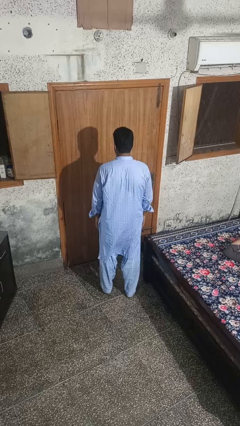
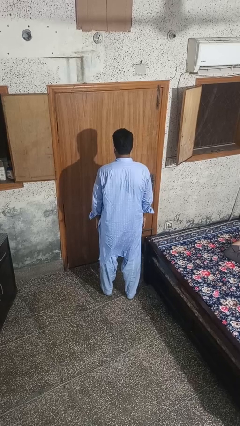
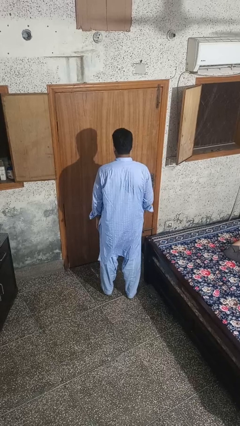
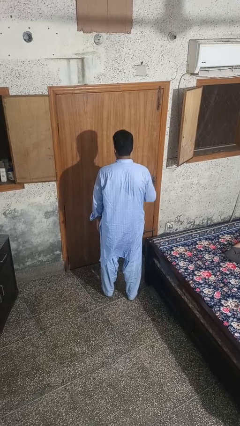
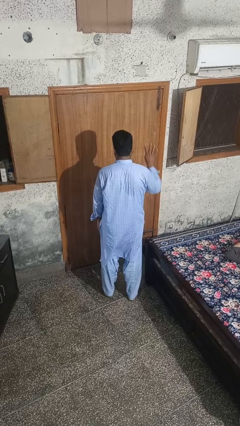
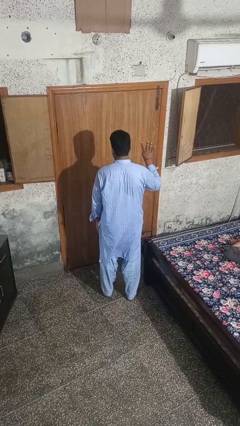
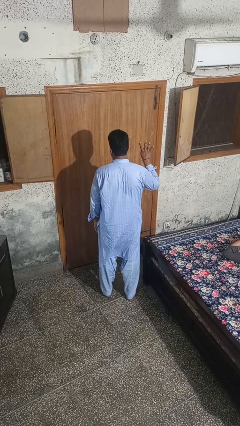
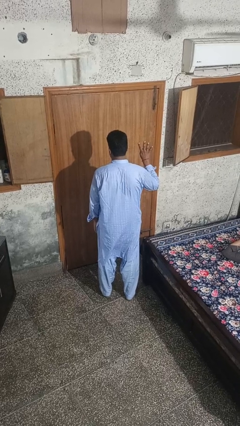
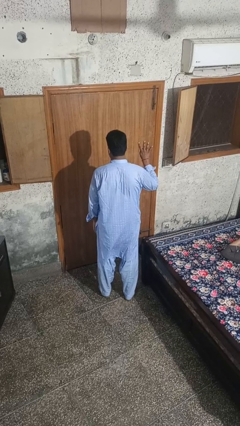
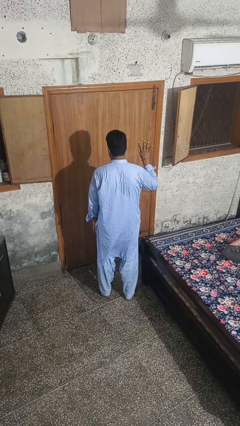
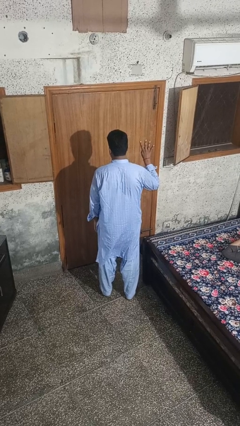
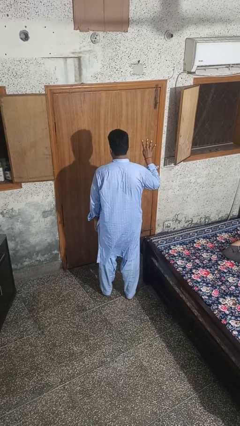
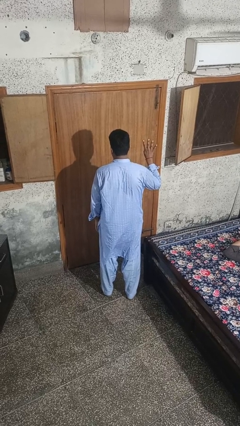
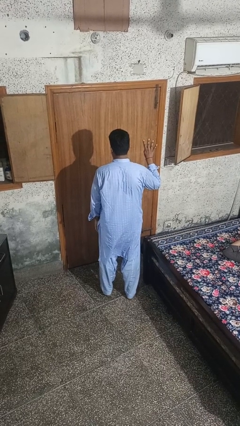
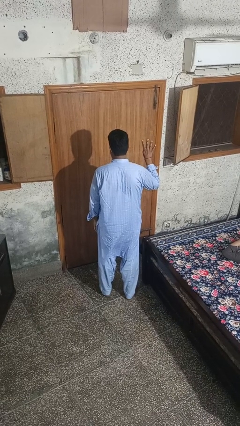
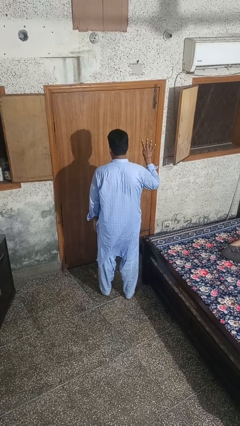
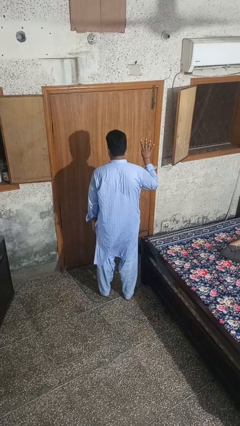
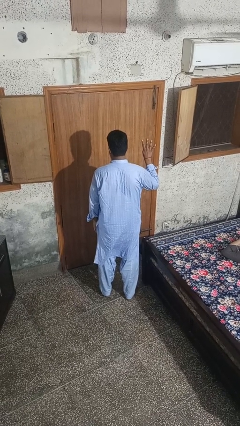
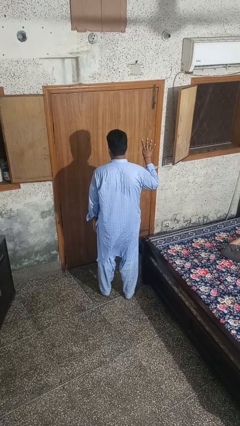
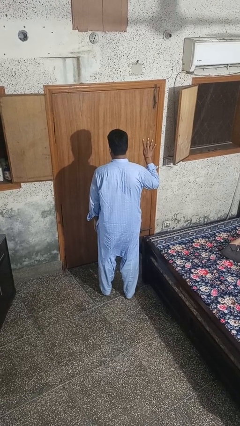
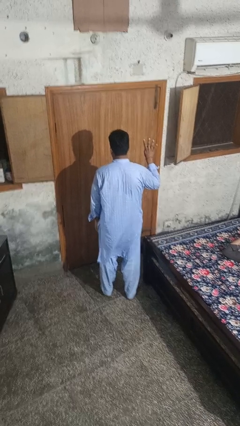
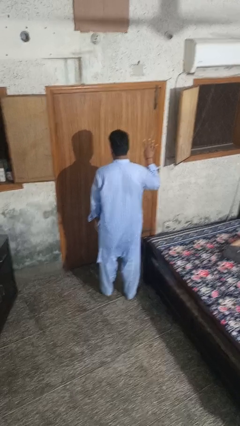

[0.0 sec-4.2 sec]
person gestures number four

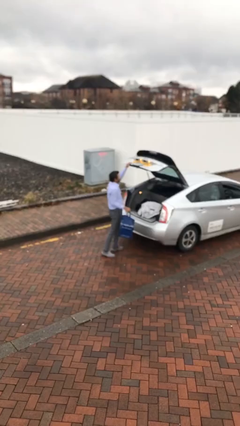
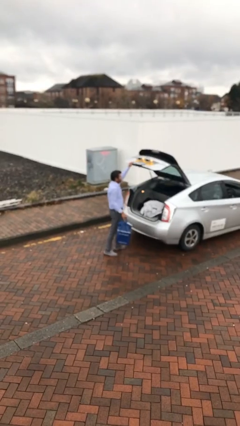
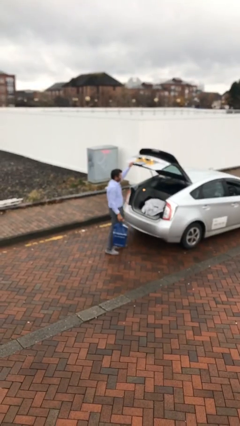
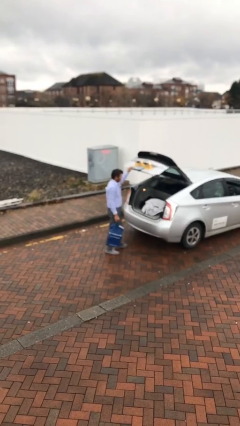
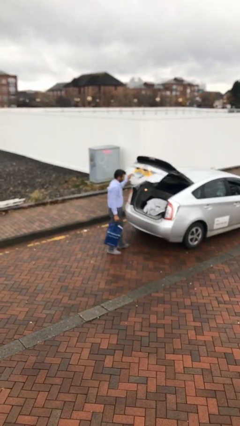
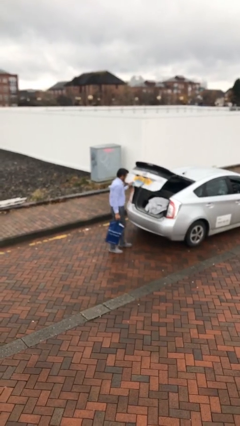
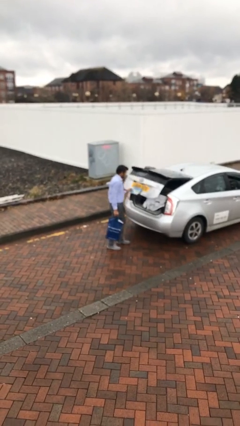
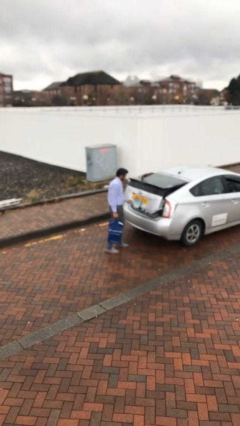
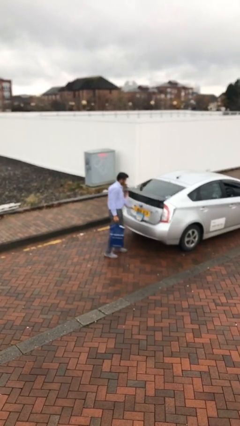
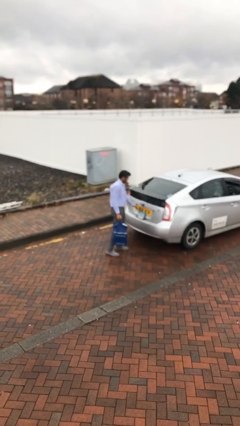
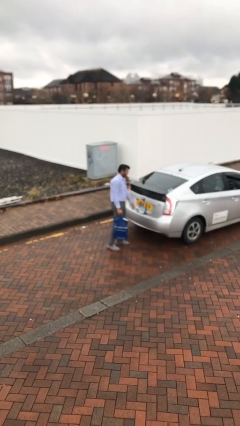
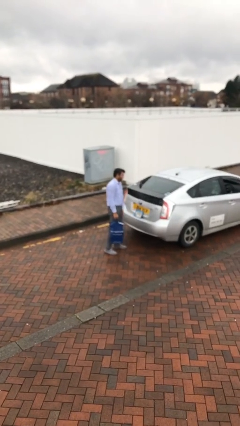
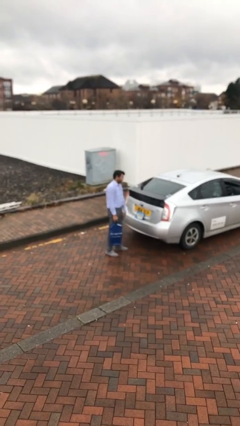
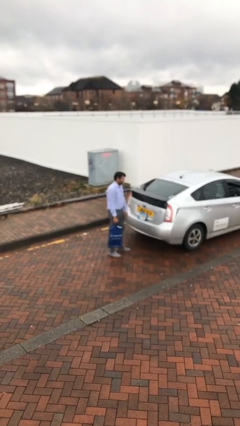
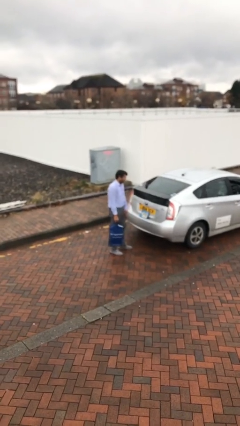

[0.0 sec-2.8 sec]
person closes car trunk

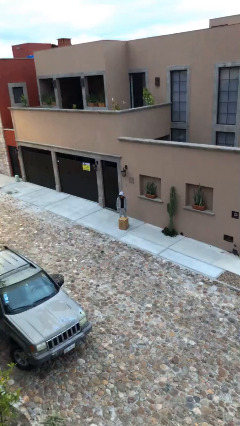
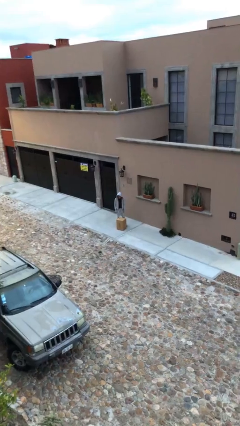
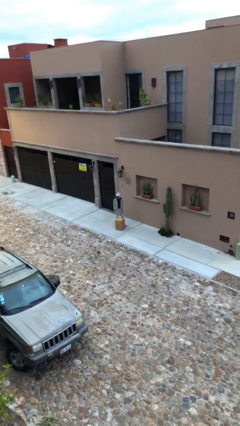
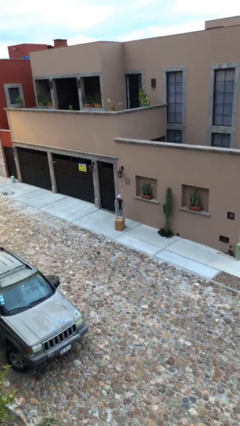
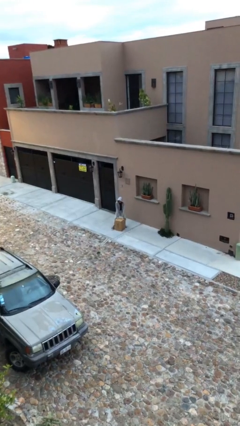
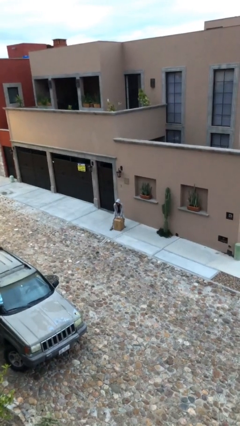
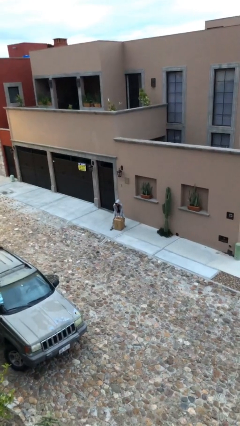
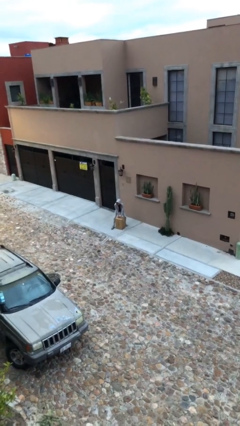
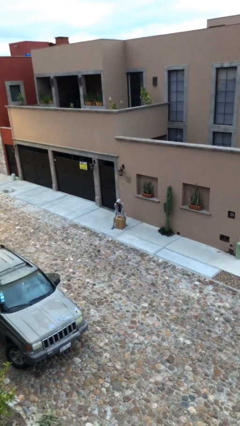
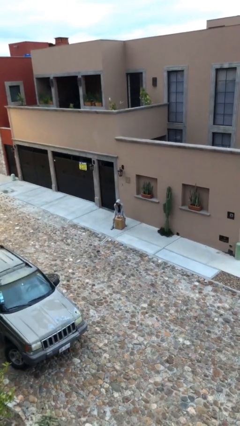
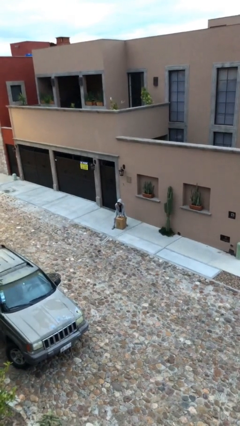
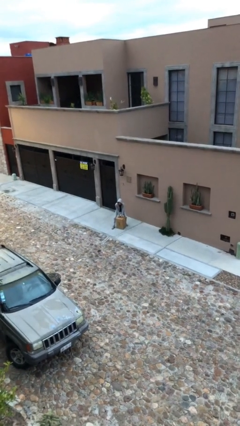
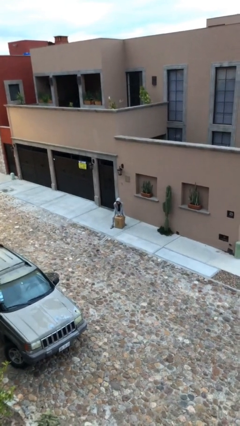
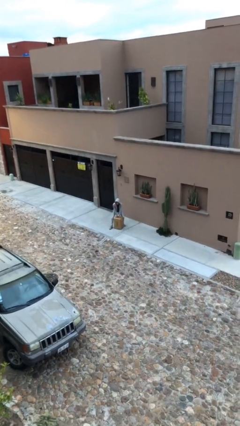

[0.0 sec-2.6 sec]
person picks up object from floor

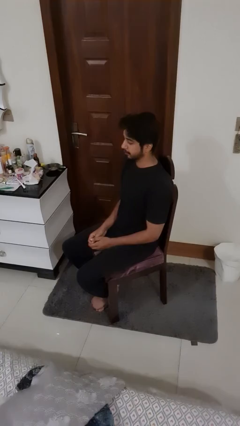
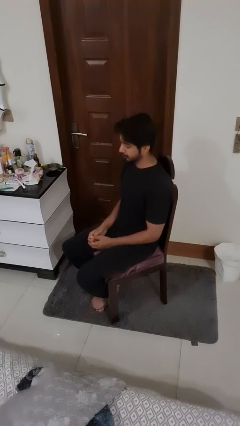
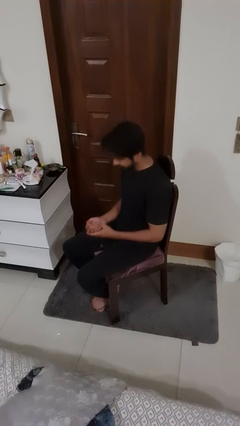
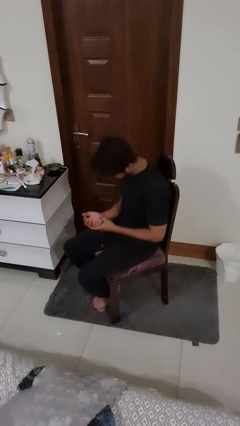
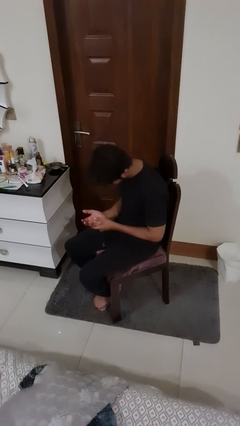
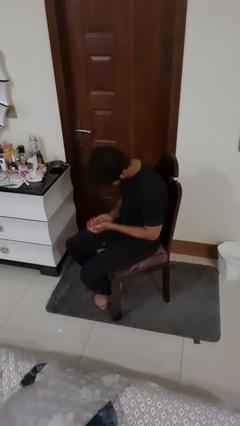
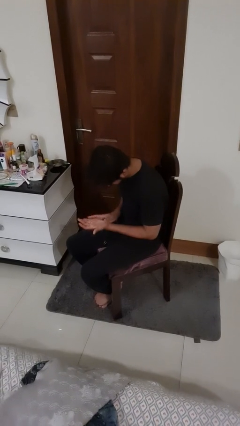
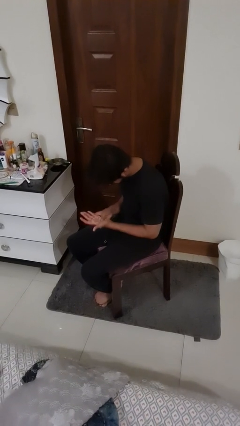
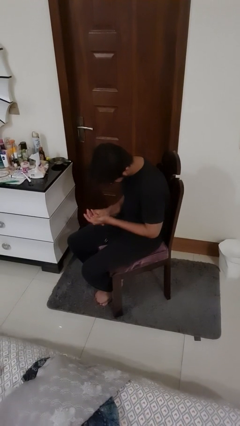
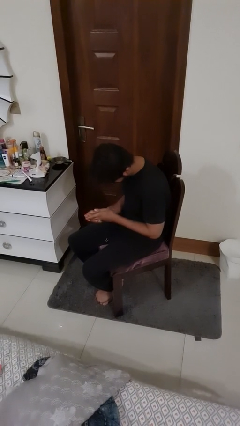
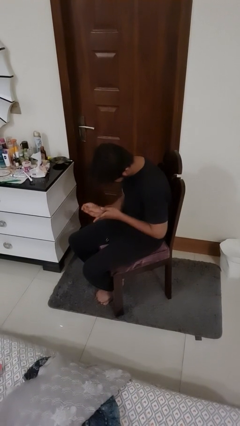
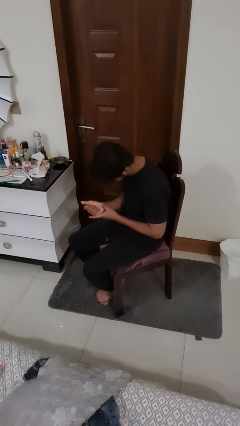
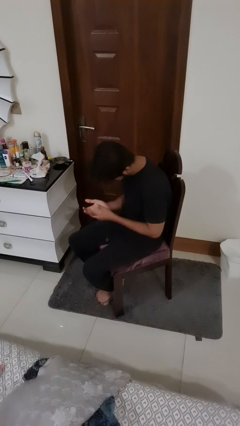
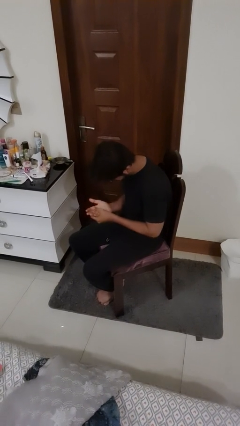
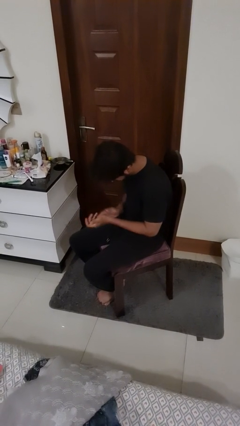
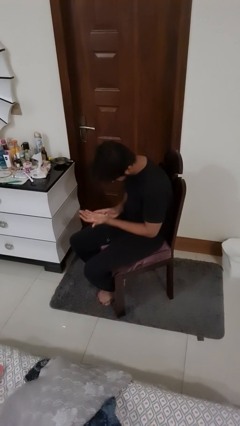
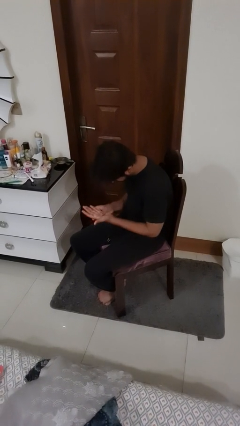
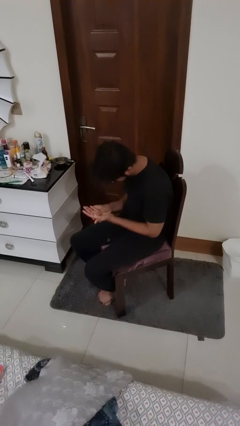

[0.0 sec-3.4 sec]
person looks at hands in lap

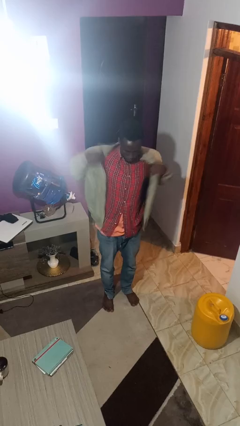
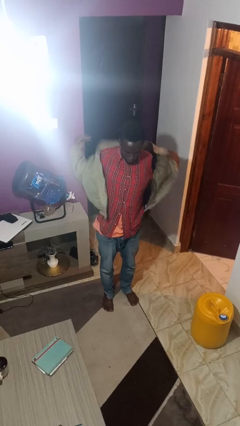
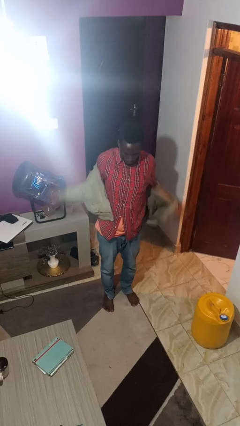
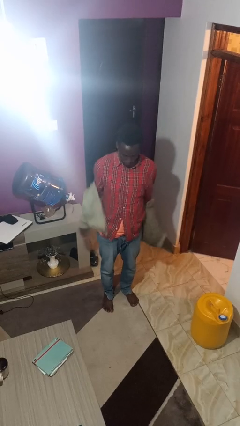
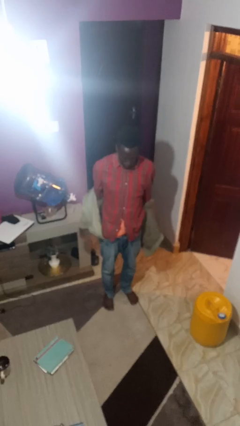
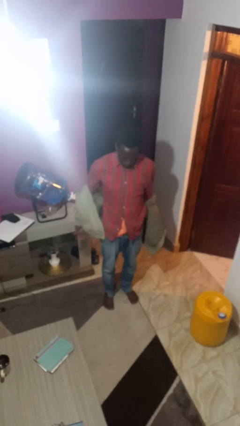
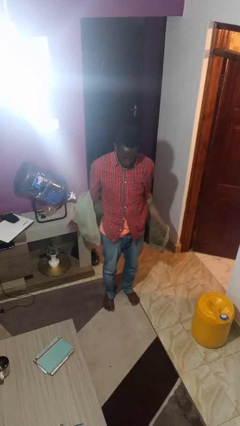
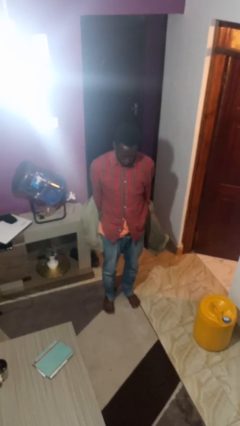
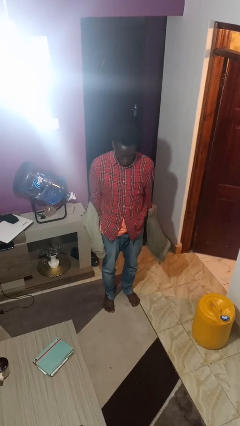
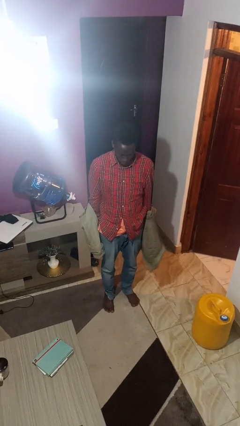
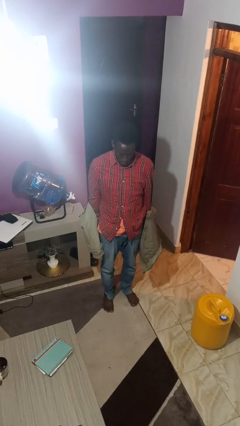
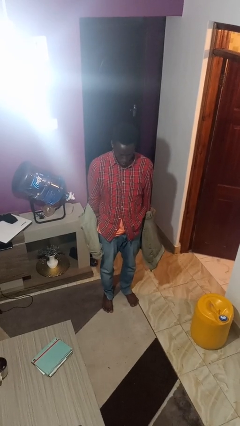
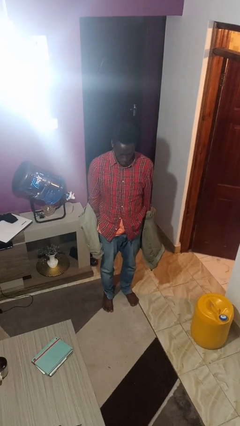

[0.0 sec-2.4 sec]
person takes off jacket

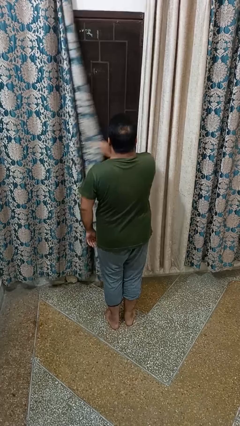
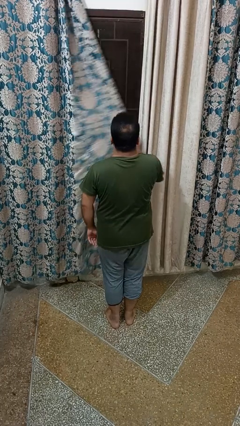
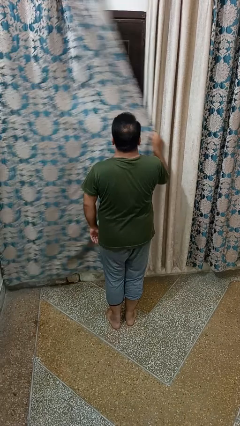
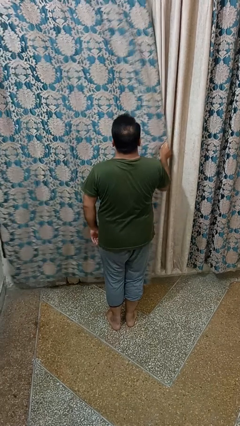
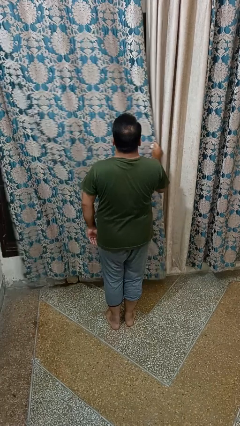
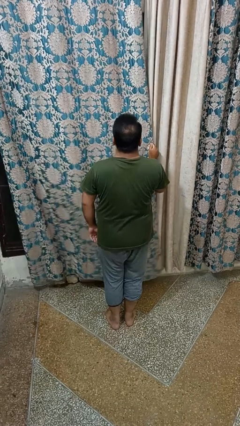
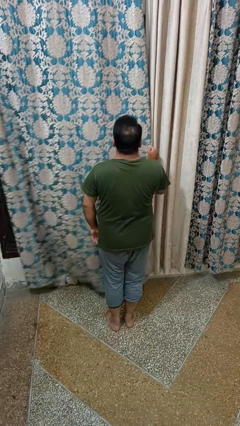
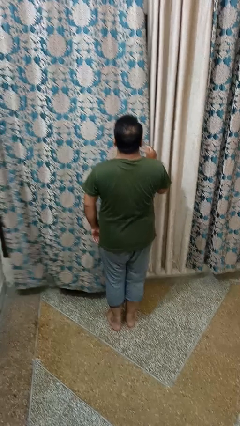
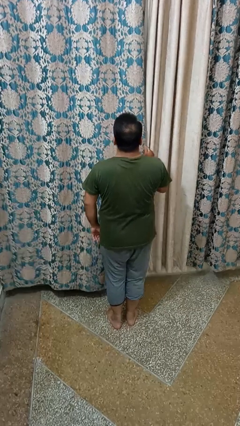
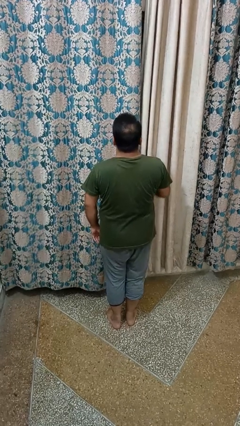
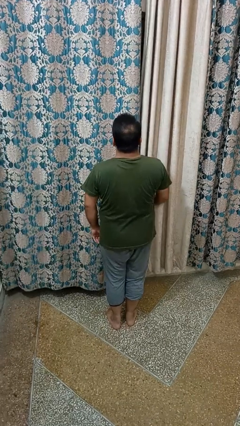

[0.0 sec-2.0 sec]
person closes curtains
